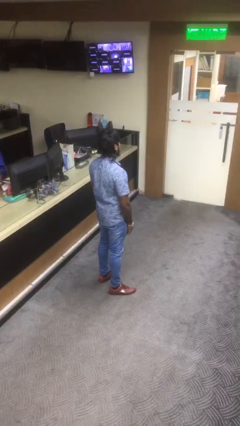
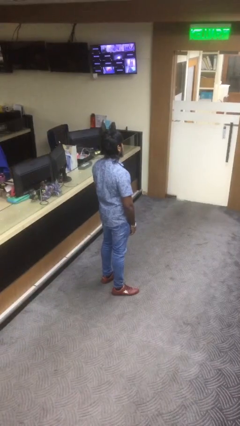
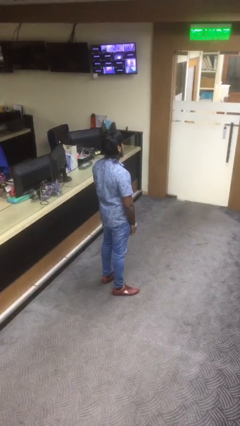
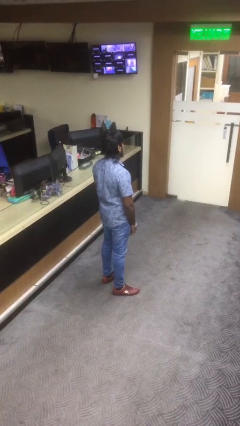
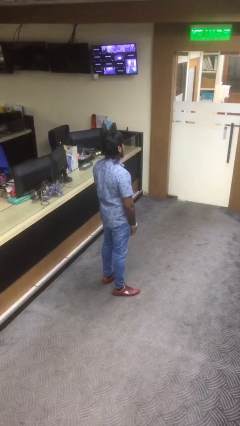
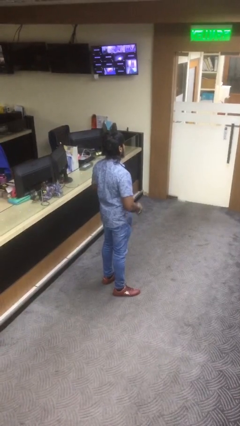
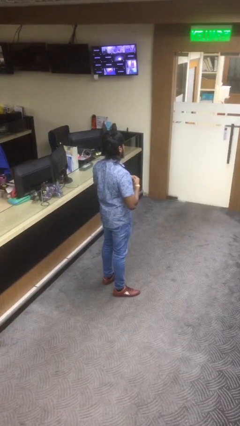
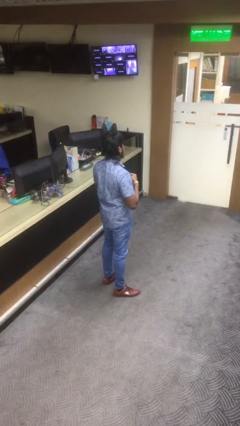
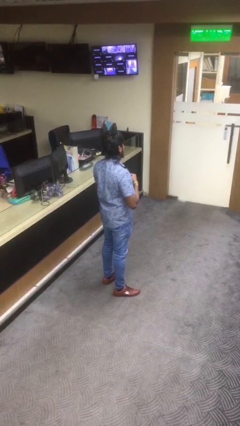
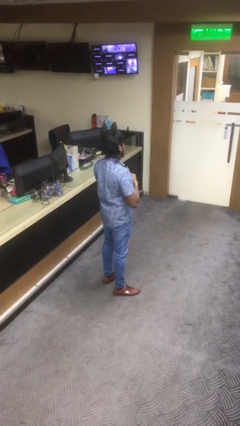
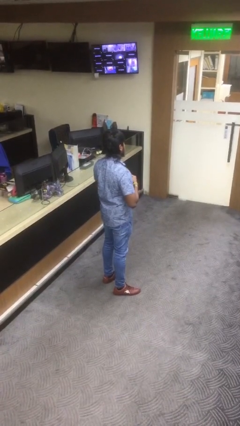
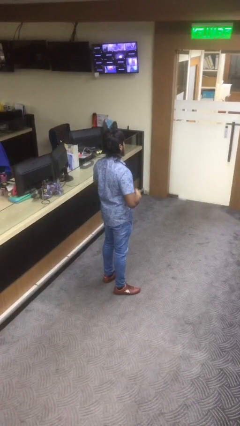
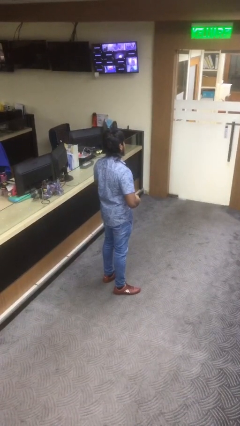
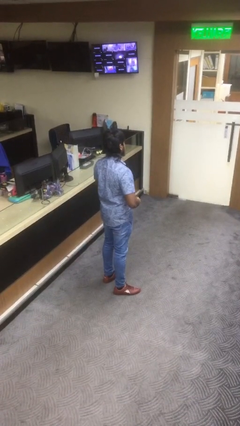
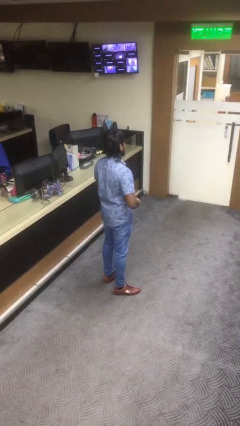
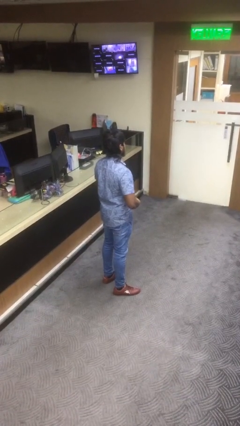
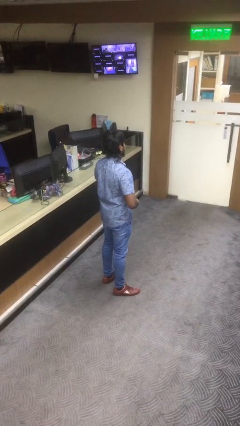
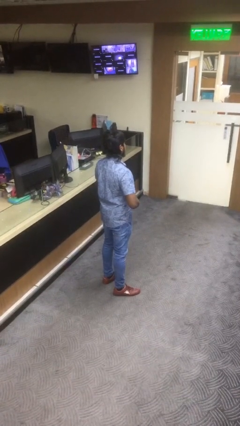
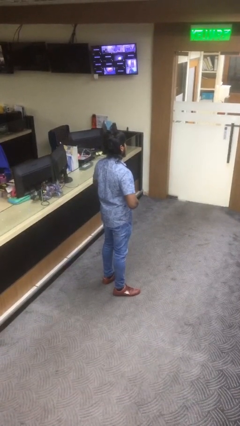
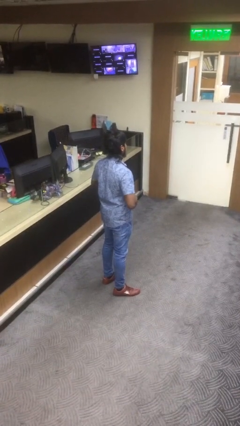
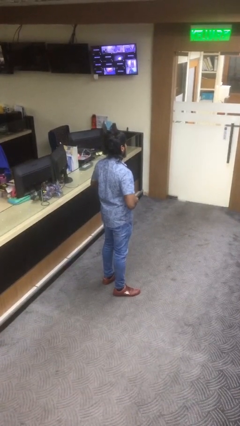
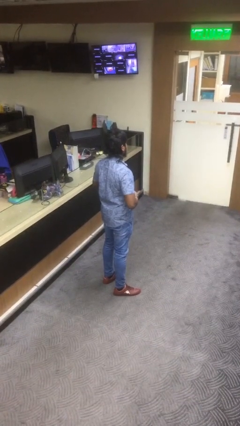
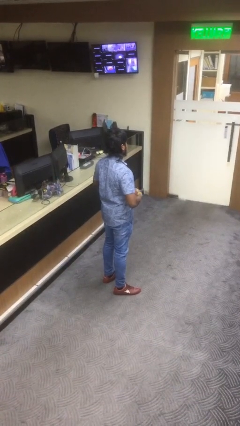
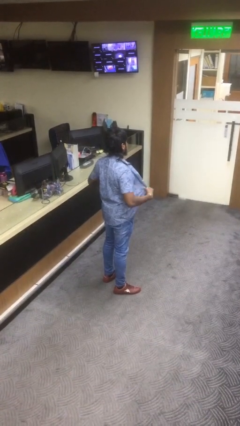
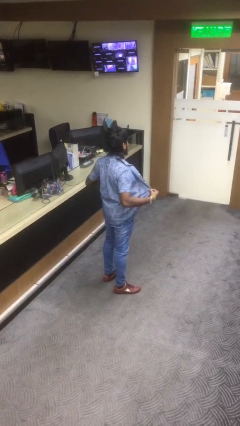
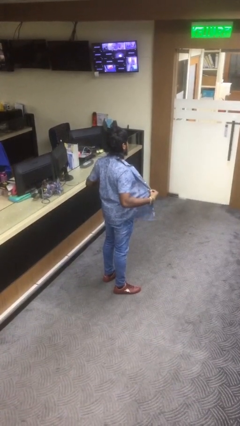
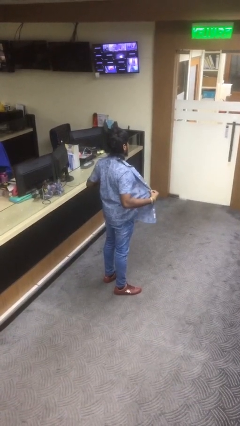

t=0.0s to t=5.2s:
person unbuttons shirt

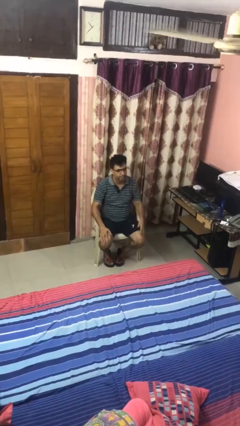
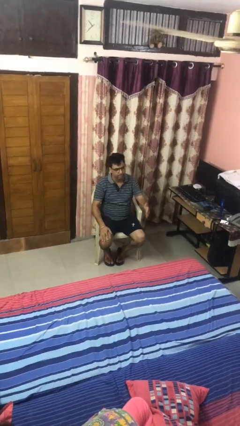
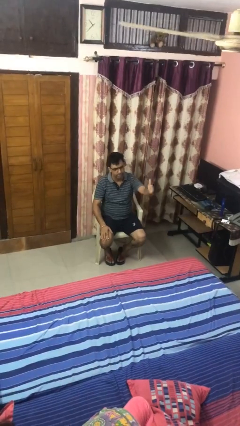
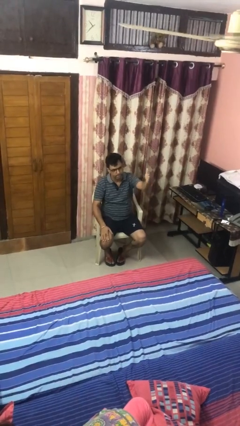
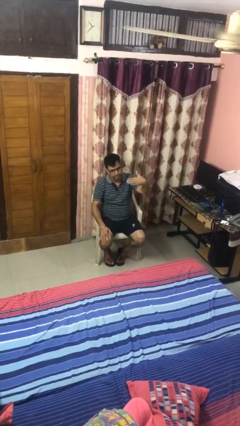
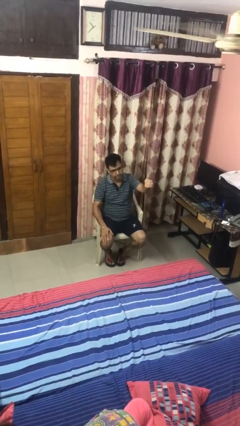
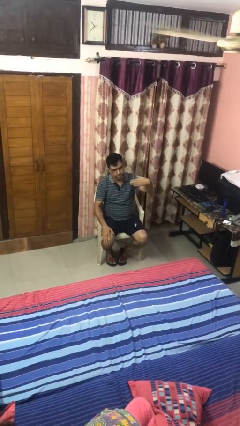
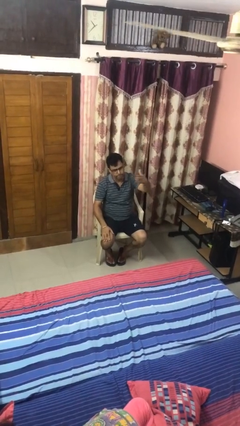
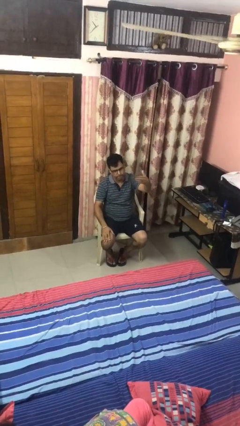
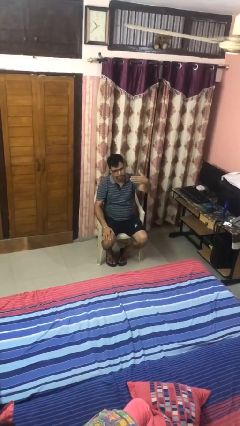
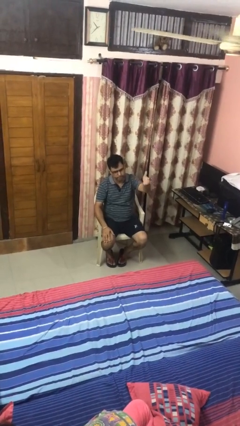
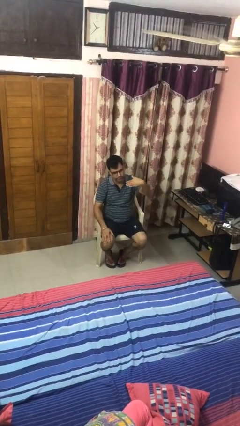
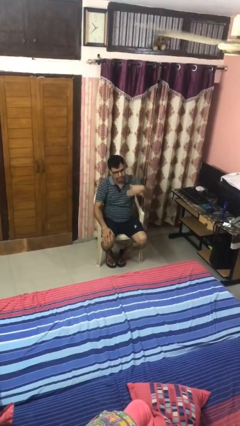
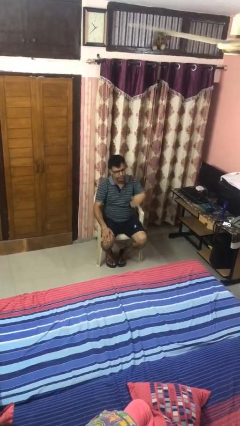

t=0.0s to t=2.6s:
person gestures come here

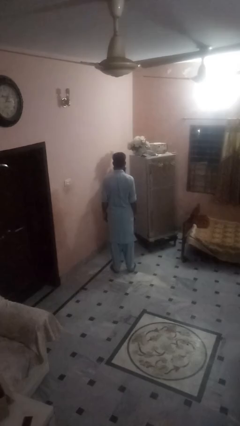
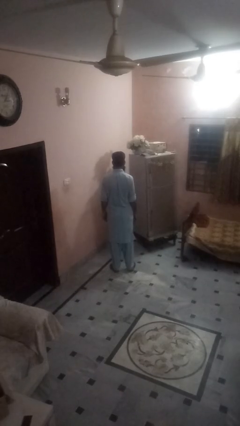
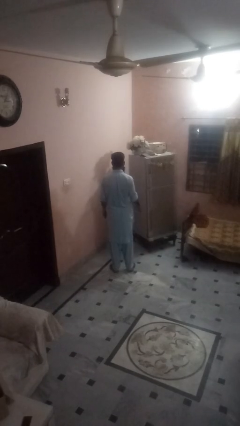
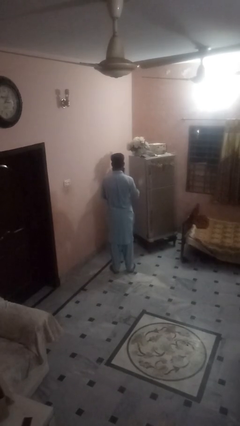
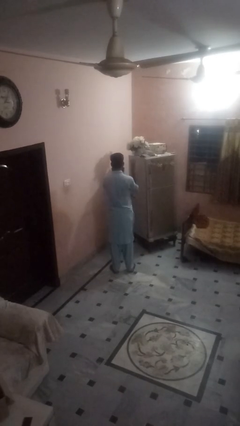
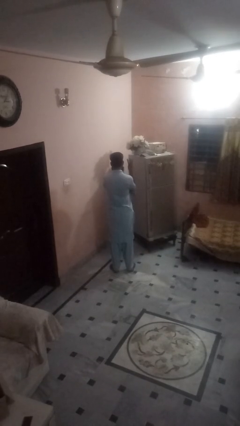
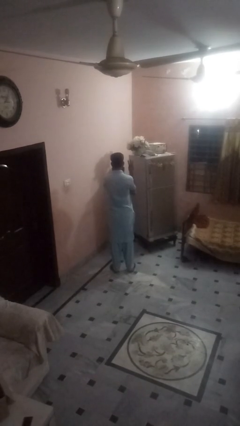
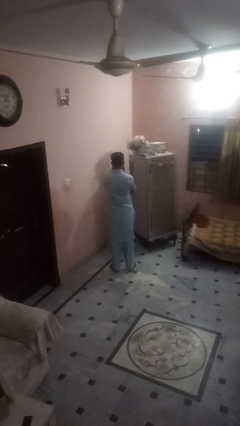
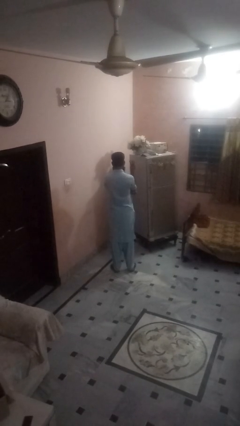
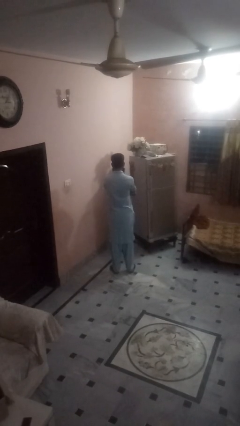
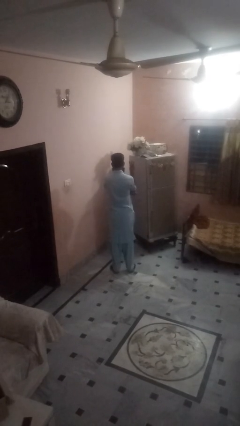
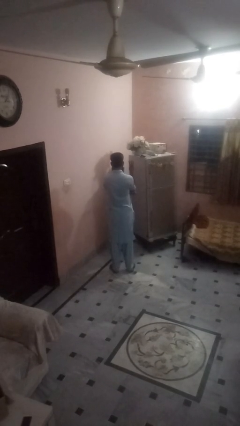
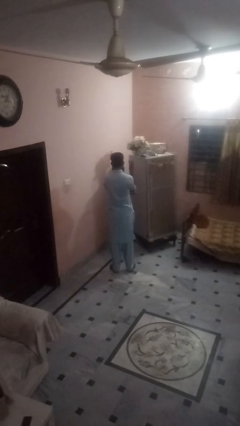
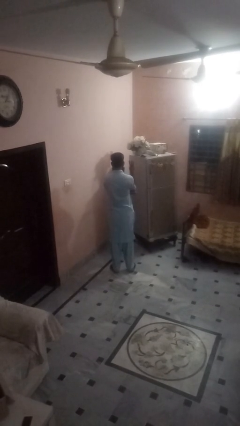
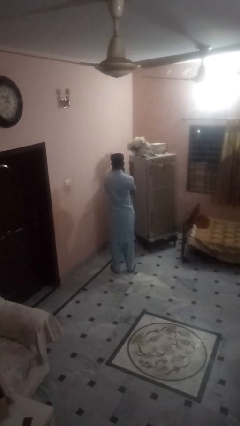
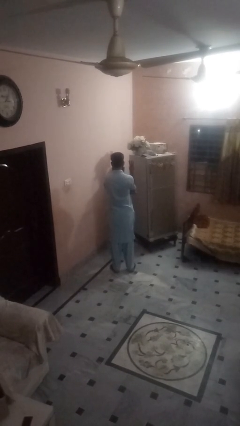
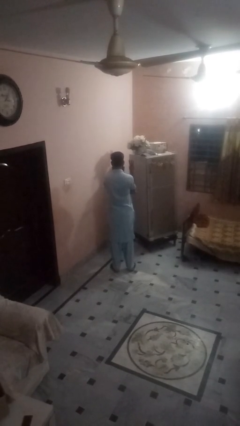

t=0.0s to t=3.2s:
person gestures number three

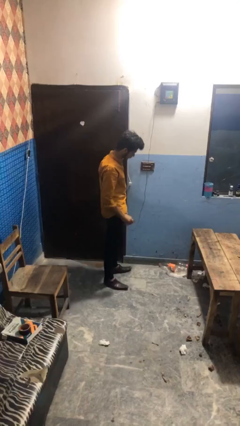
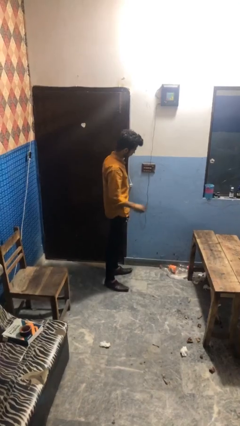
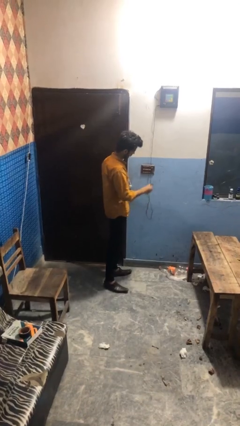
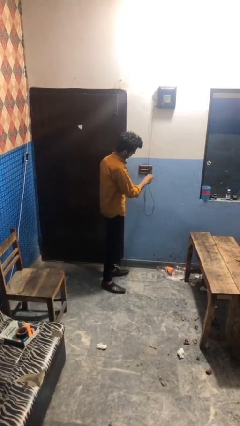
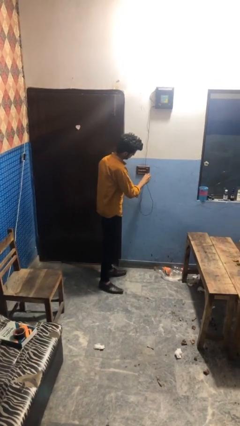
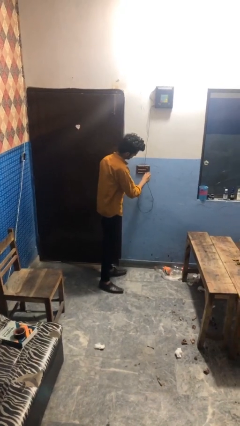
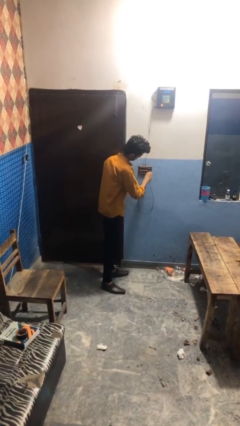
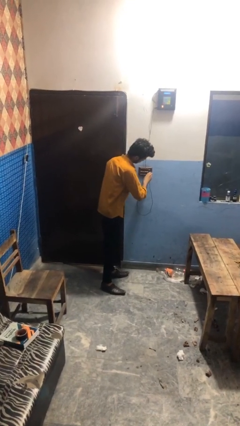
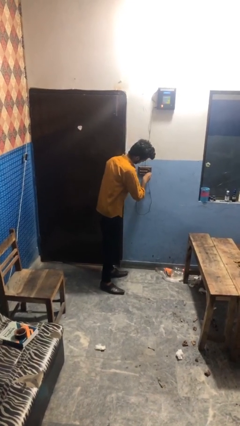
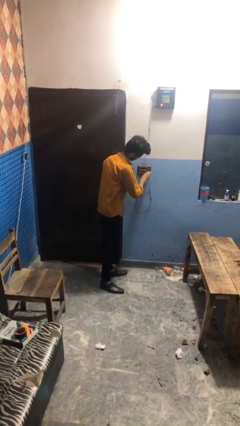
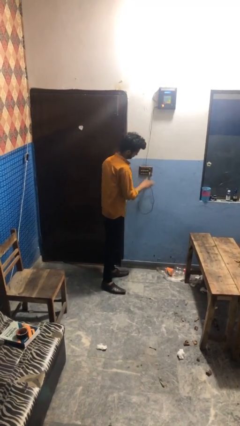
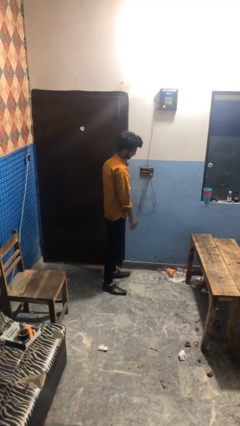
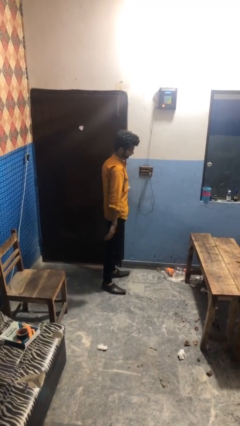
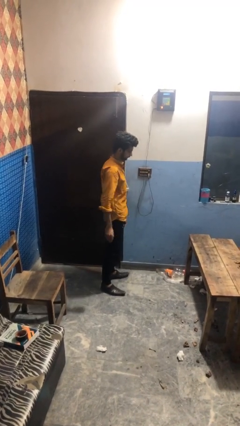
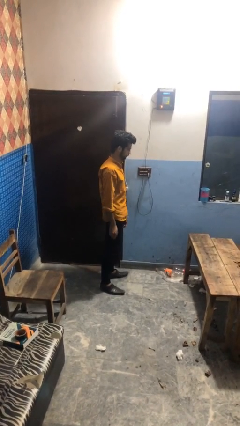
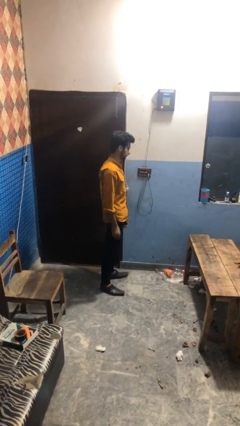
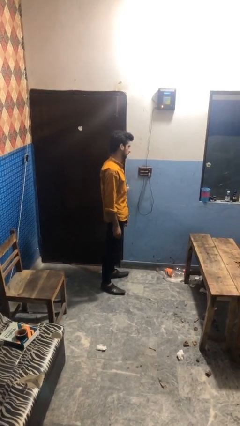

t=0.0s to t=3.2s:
person plugs into electrical socket

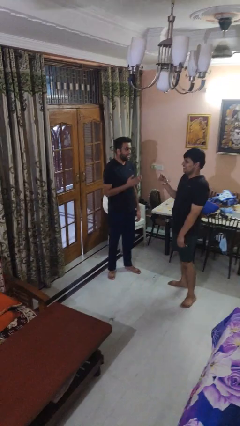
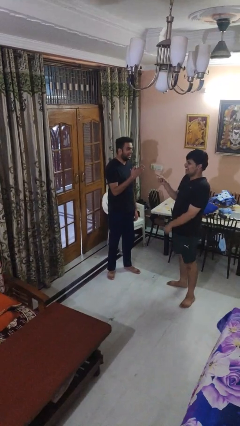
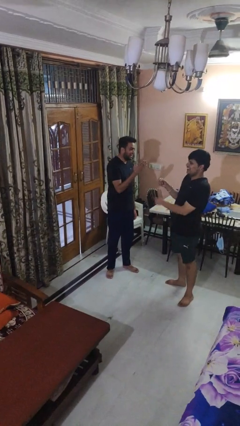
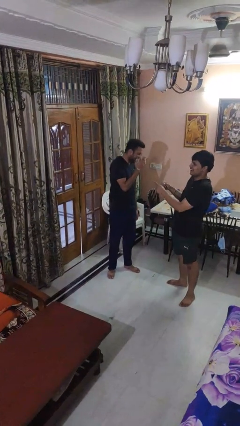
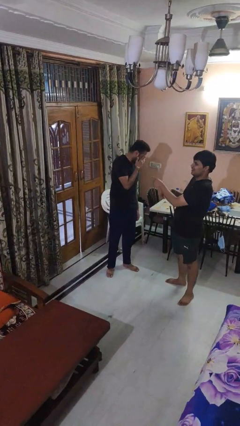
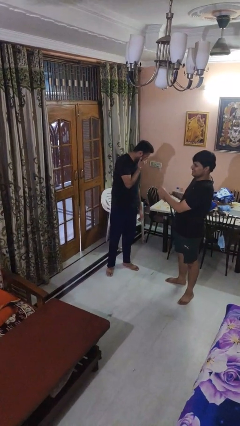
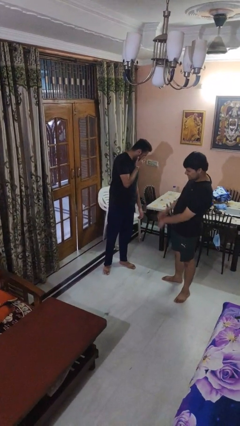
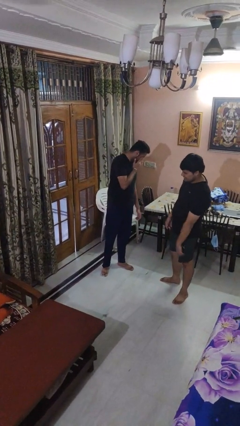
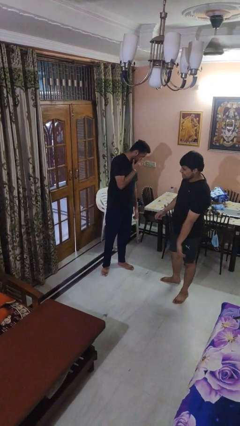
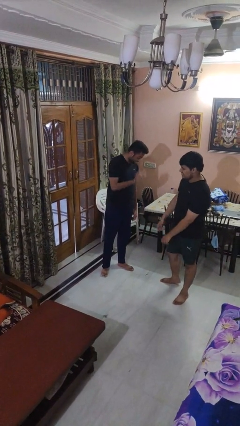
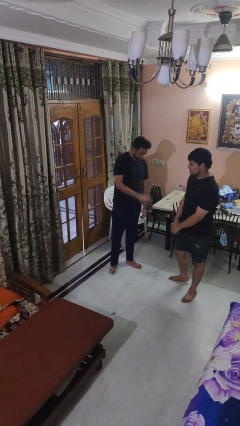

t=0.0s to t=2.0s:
person laughs with person

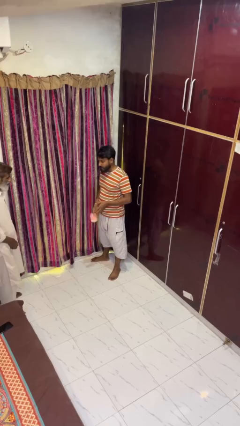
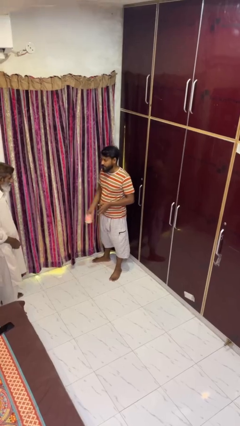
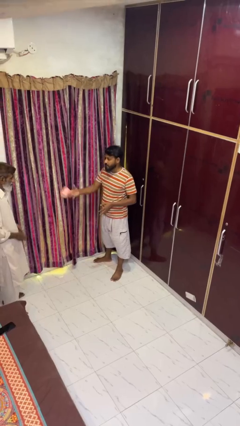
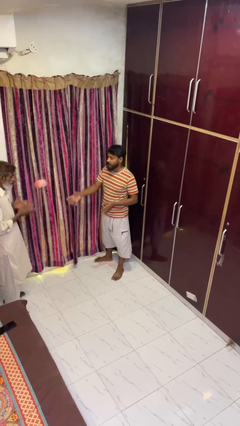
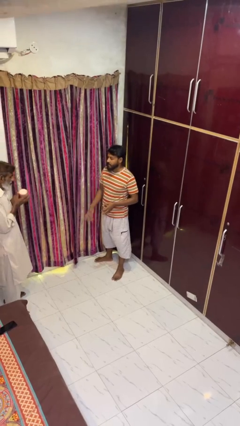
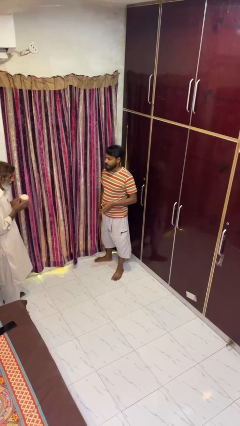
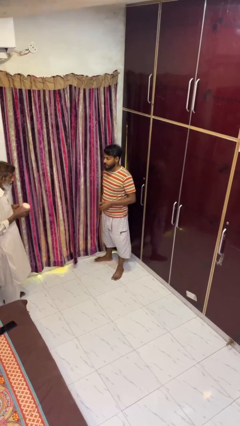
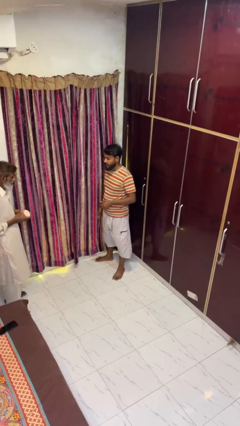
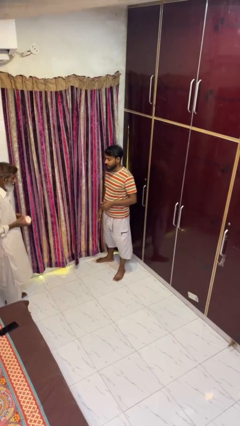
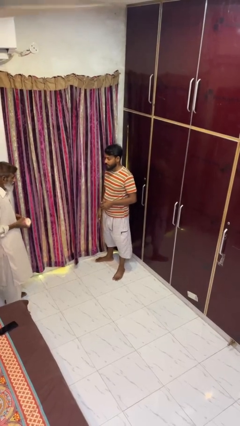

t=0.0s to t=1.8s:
person throws object to person
